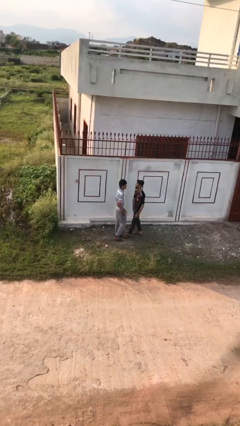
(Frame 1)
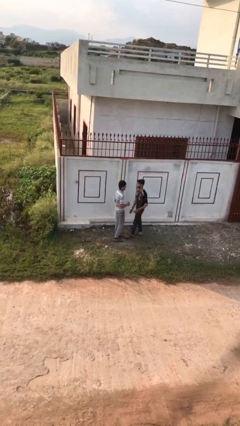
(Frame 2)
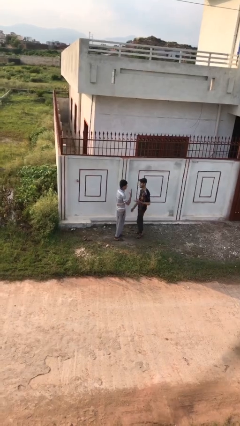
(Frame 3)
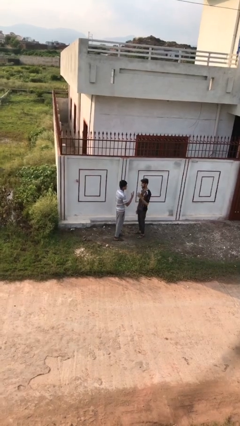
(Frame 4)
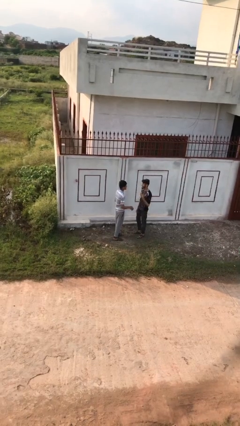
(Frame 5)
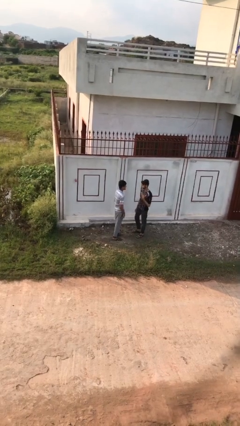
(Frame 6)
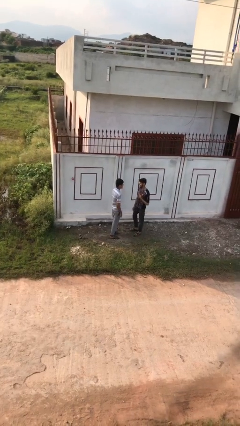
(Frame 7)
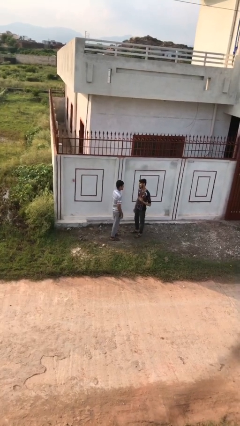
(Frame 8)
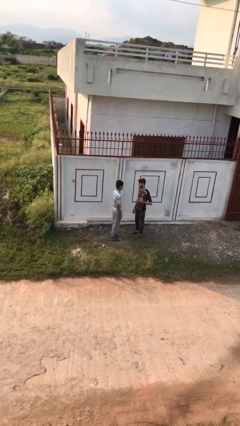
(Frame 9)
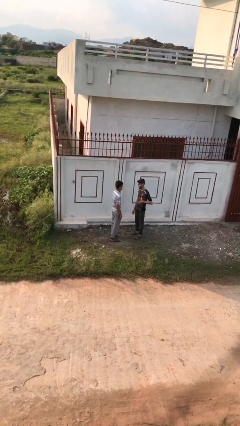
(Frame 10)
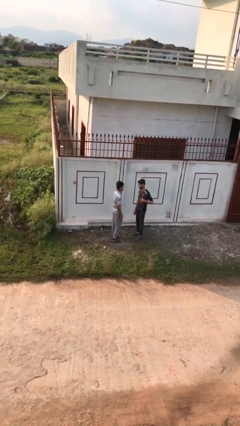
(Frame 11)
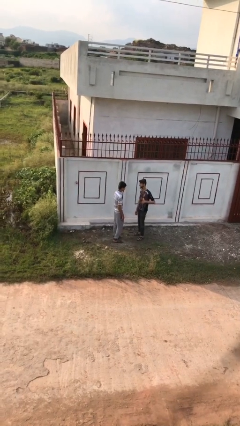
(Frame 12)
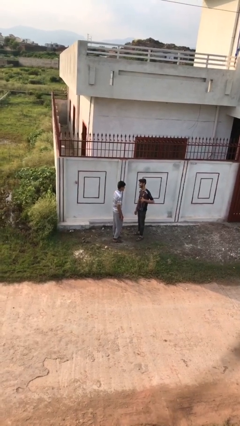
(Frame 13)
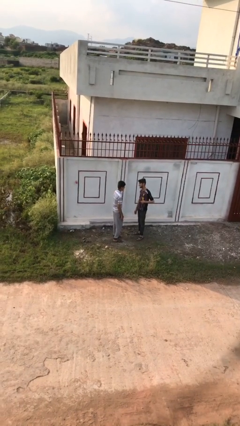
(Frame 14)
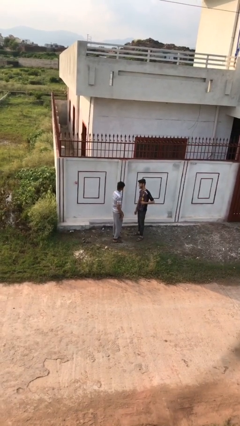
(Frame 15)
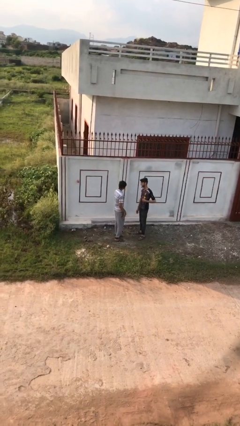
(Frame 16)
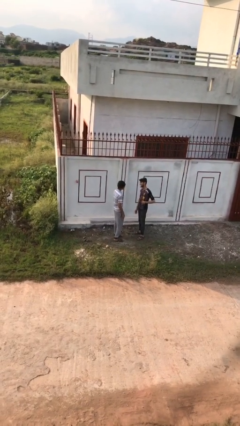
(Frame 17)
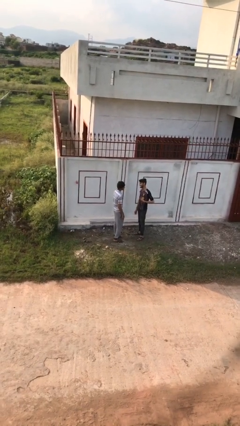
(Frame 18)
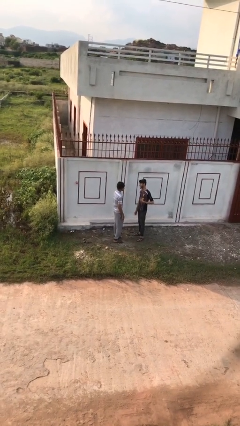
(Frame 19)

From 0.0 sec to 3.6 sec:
person talks to person

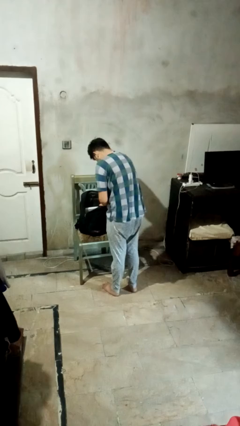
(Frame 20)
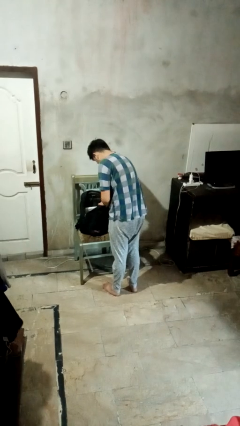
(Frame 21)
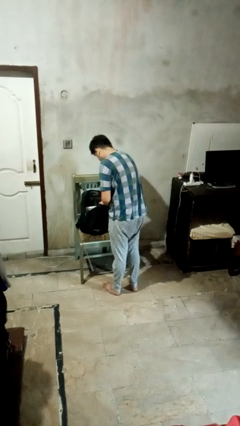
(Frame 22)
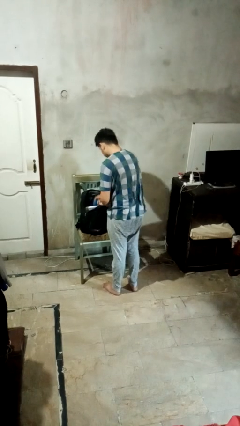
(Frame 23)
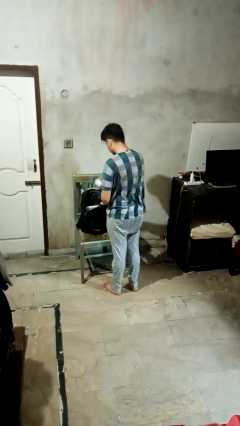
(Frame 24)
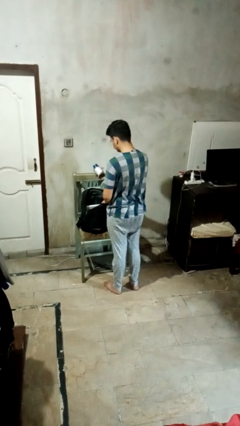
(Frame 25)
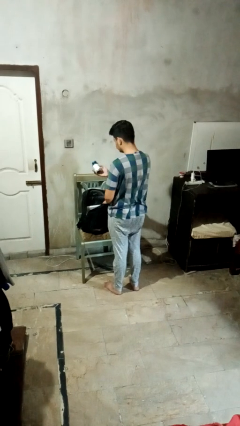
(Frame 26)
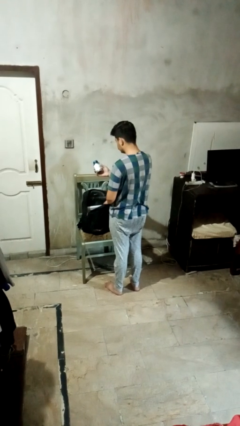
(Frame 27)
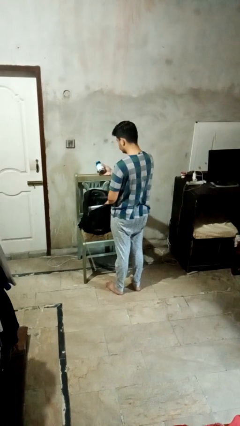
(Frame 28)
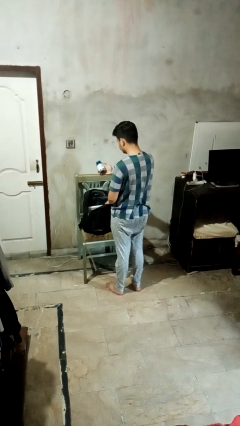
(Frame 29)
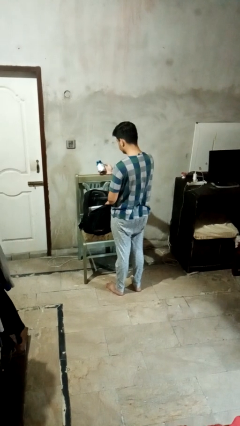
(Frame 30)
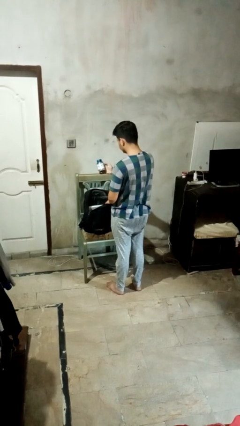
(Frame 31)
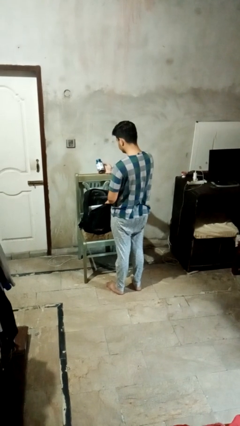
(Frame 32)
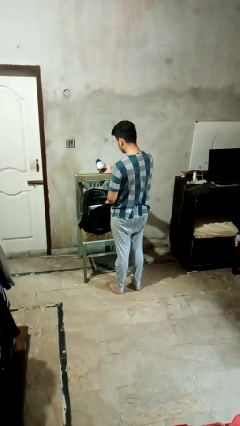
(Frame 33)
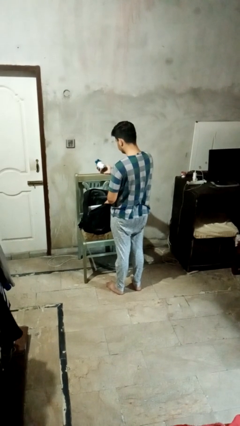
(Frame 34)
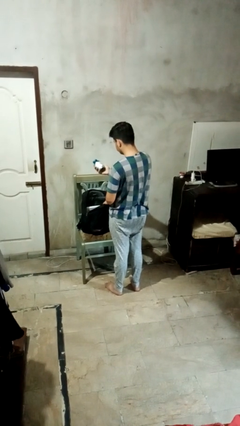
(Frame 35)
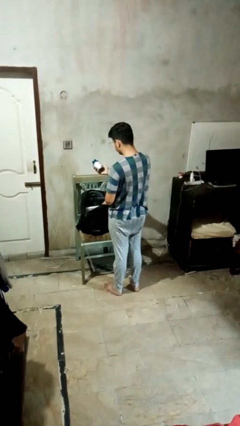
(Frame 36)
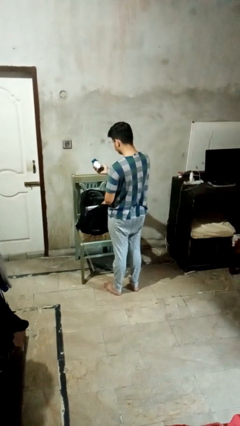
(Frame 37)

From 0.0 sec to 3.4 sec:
person takes object from backpack

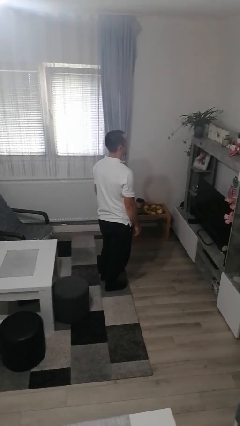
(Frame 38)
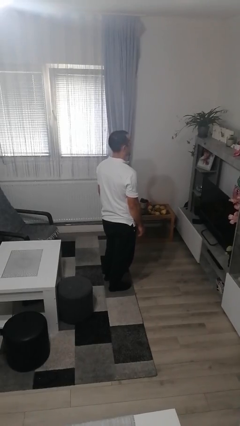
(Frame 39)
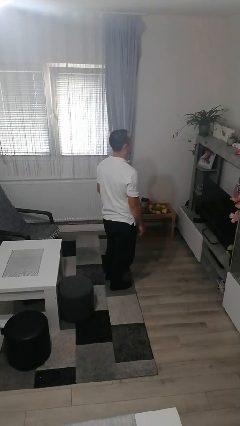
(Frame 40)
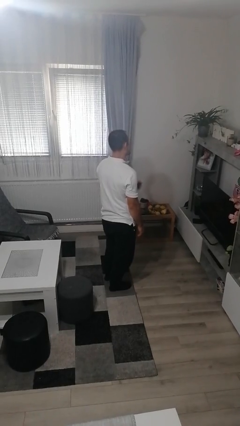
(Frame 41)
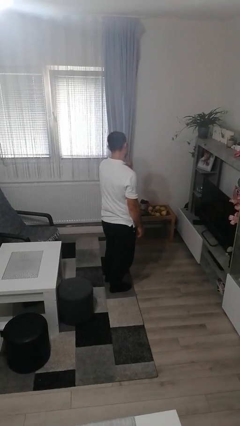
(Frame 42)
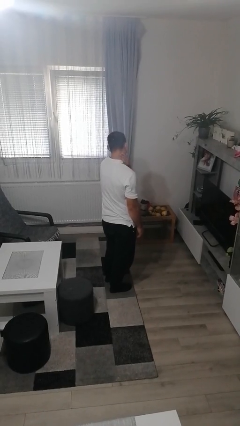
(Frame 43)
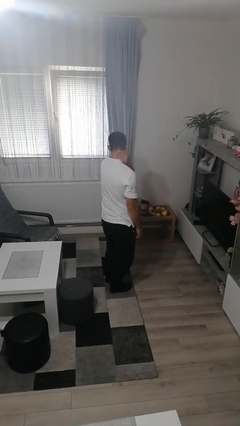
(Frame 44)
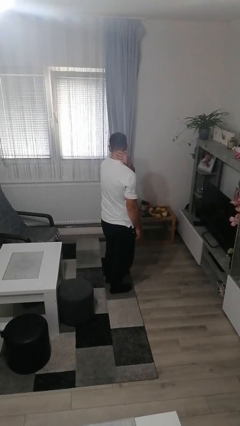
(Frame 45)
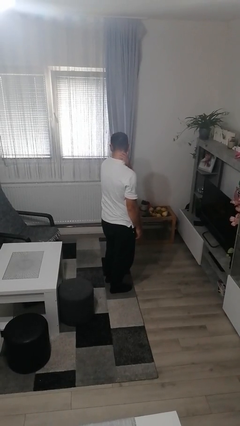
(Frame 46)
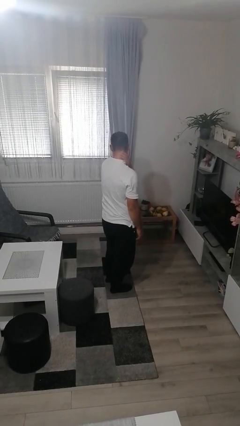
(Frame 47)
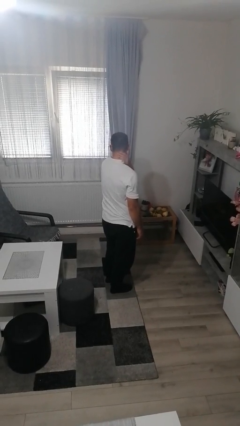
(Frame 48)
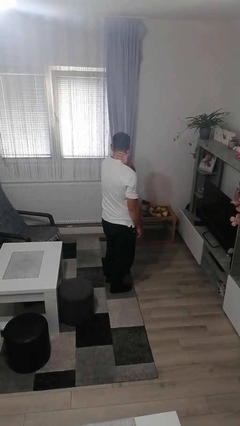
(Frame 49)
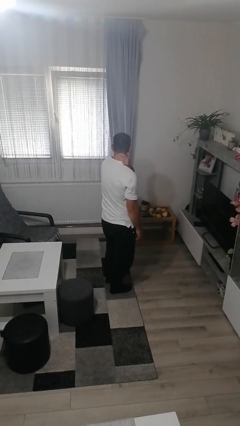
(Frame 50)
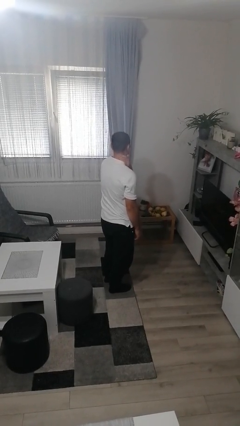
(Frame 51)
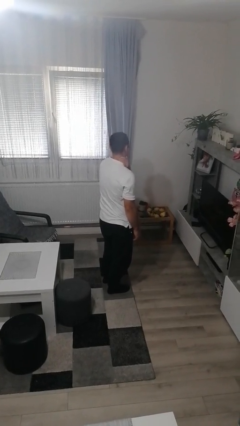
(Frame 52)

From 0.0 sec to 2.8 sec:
person rubs neck

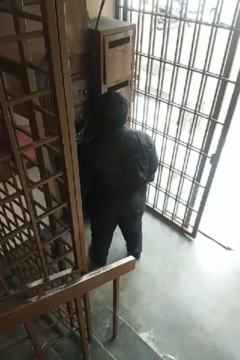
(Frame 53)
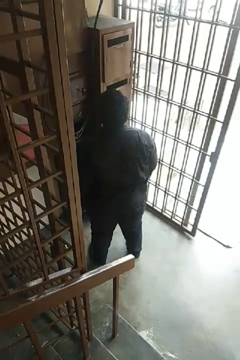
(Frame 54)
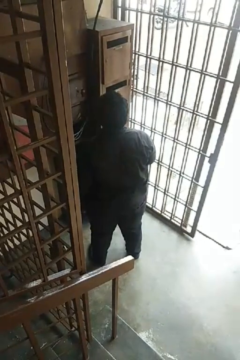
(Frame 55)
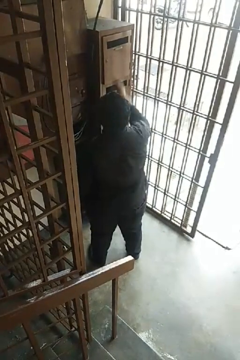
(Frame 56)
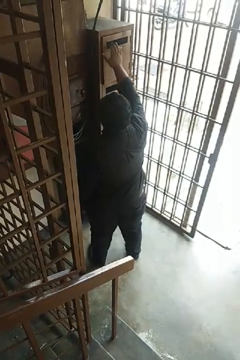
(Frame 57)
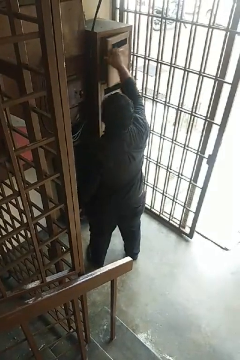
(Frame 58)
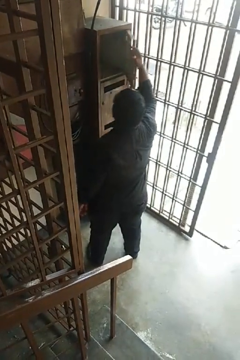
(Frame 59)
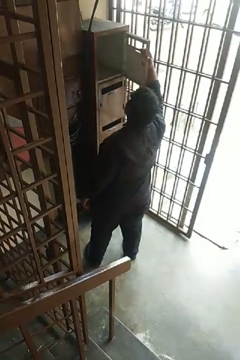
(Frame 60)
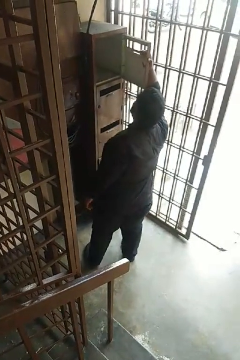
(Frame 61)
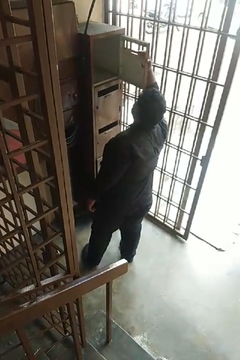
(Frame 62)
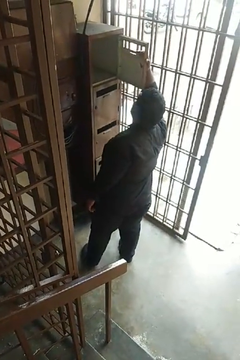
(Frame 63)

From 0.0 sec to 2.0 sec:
person opens mailbox

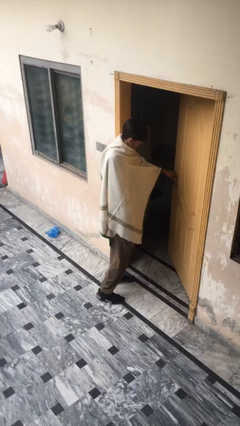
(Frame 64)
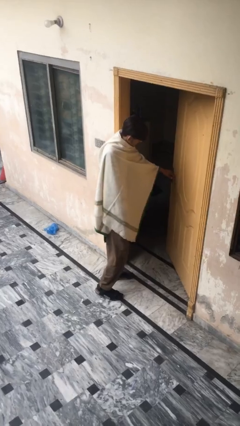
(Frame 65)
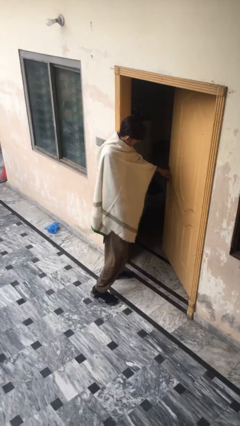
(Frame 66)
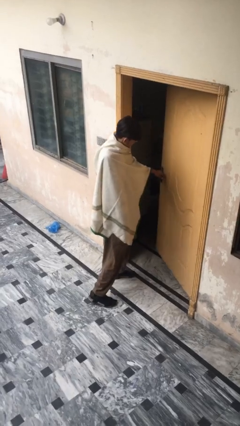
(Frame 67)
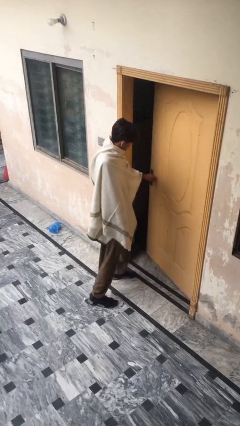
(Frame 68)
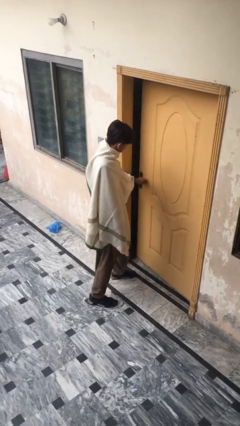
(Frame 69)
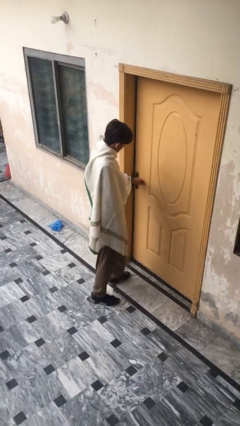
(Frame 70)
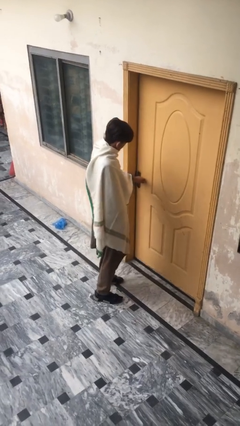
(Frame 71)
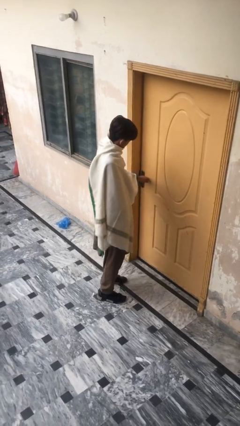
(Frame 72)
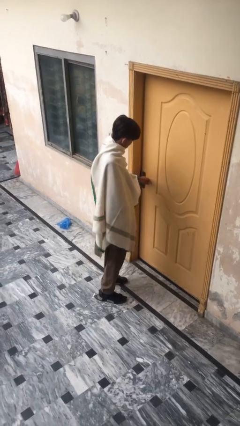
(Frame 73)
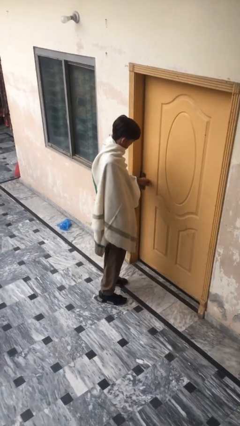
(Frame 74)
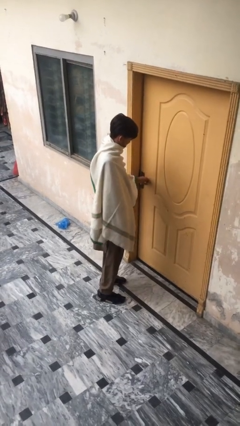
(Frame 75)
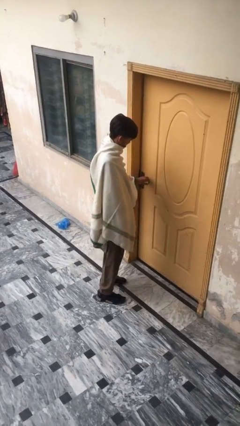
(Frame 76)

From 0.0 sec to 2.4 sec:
person closes facility door

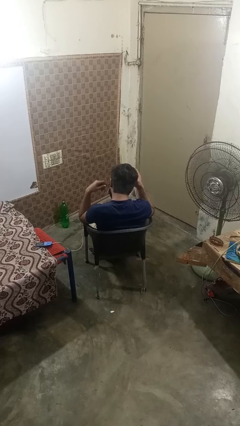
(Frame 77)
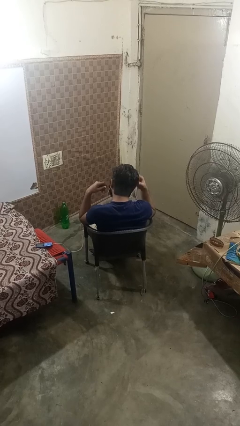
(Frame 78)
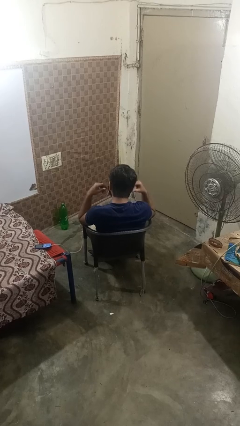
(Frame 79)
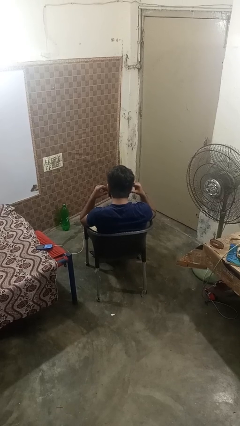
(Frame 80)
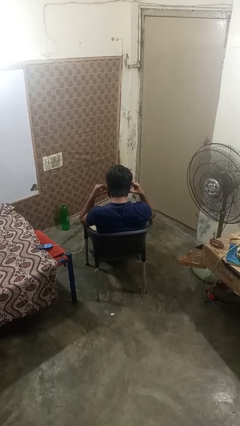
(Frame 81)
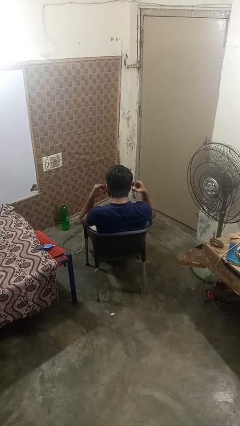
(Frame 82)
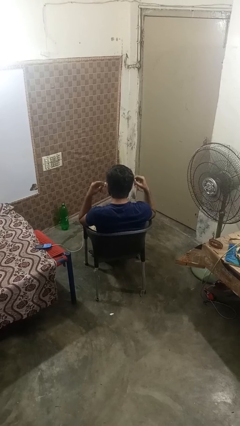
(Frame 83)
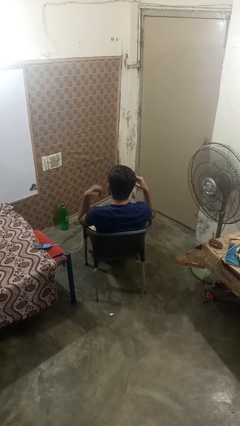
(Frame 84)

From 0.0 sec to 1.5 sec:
person takes off headphones

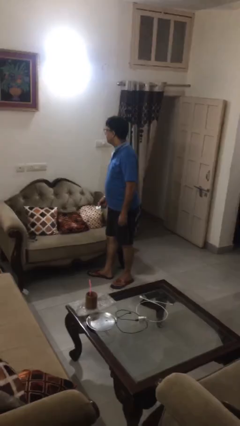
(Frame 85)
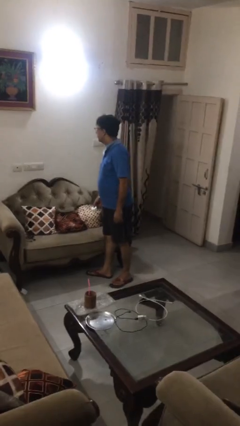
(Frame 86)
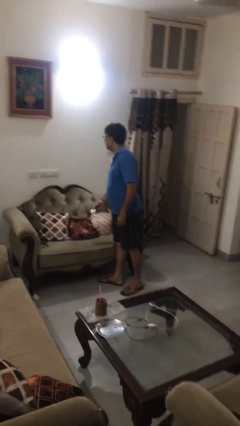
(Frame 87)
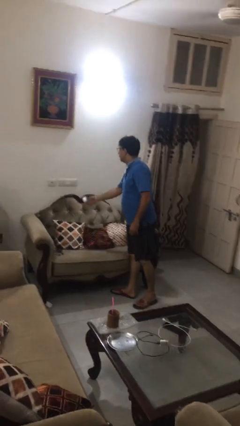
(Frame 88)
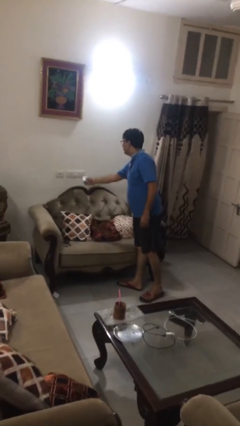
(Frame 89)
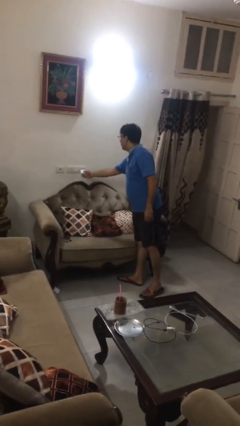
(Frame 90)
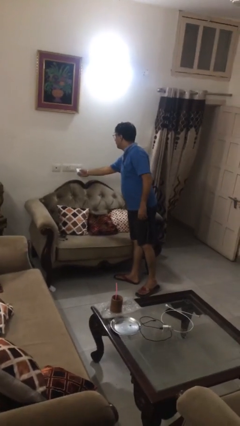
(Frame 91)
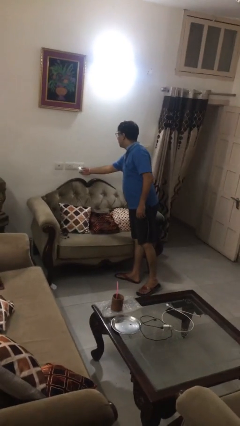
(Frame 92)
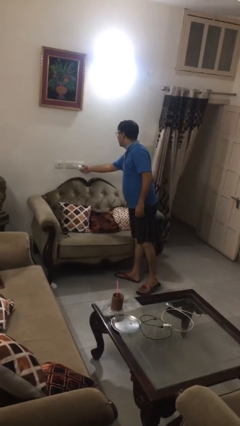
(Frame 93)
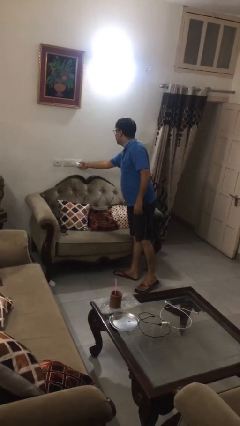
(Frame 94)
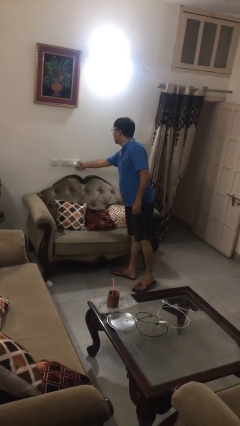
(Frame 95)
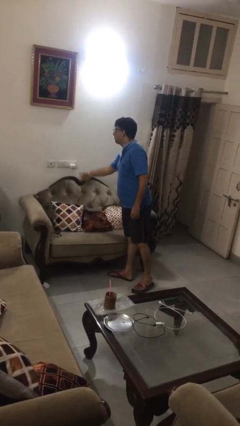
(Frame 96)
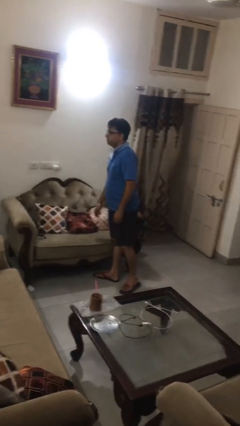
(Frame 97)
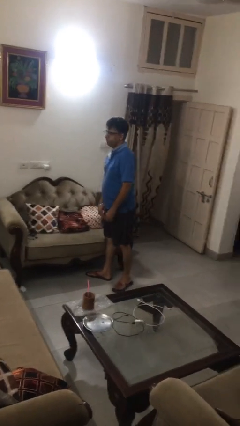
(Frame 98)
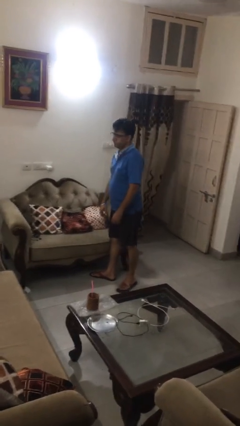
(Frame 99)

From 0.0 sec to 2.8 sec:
person plugs into electrical socket
